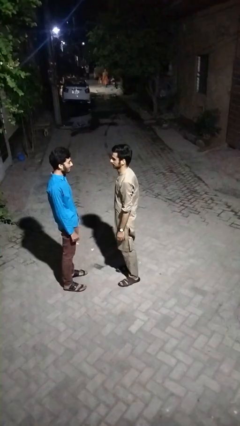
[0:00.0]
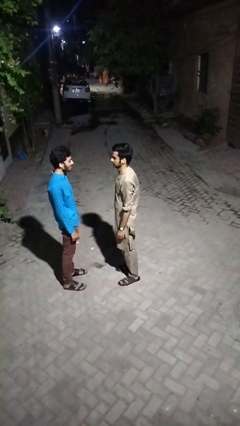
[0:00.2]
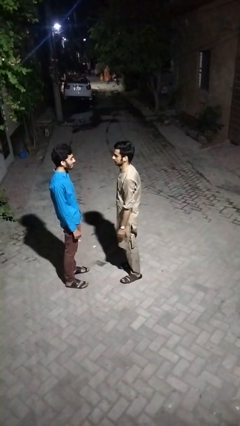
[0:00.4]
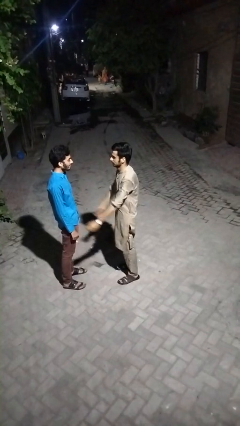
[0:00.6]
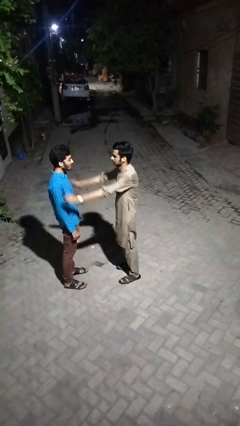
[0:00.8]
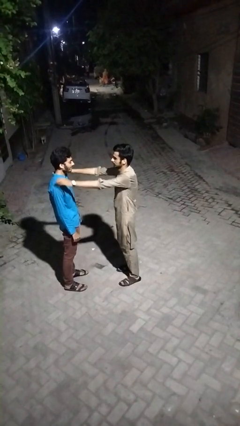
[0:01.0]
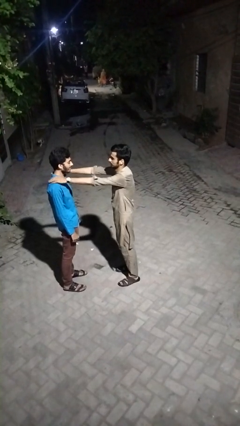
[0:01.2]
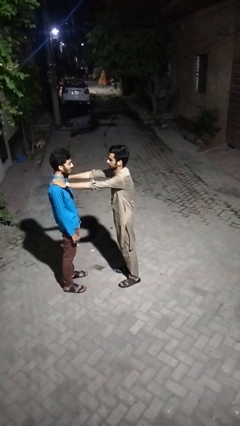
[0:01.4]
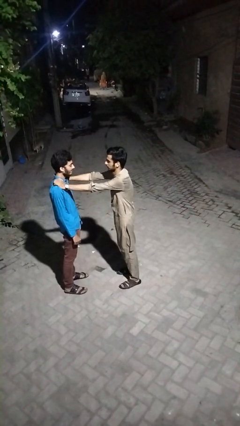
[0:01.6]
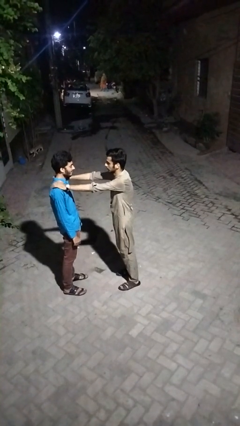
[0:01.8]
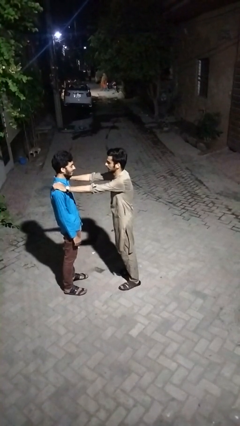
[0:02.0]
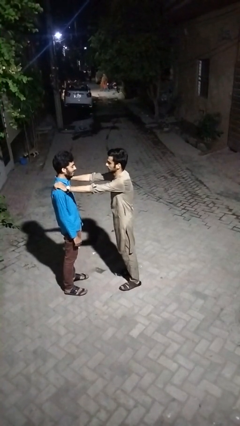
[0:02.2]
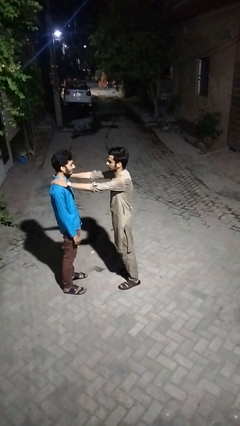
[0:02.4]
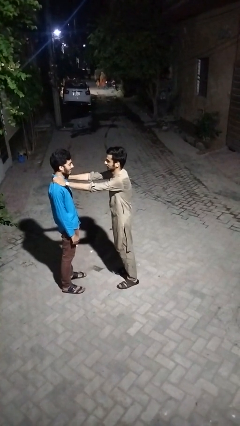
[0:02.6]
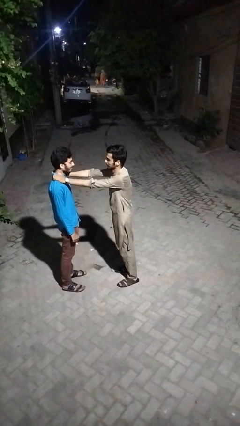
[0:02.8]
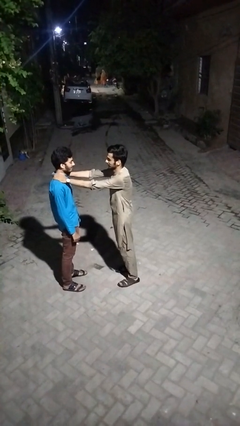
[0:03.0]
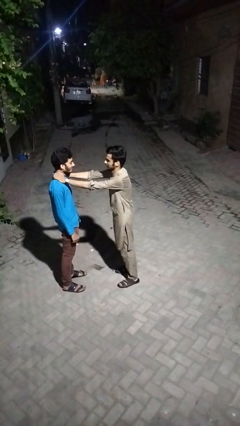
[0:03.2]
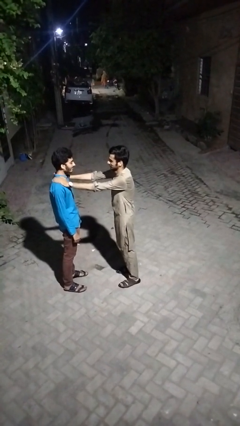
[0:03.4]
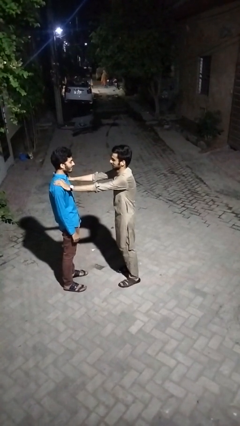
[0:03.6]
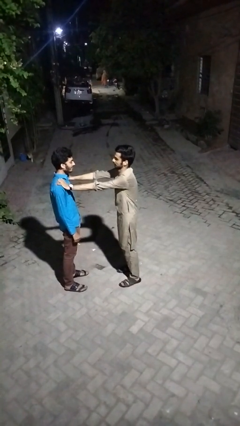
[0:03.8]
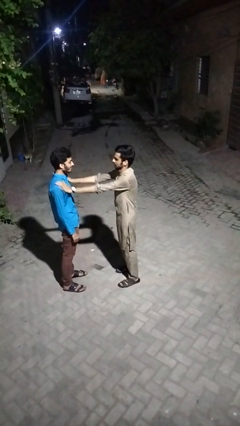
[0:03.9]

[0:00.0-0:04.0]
person pounds shoulders of person

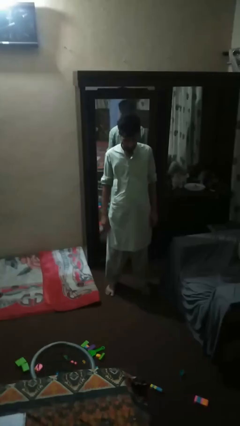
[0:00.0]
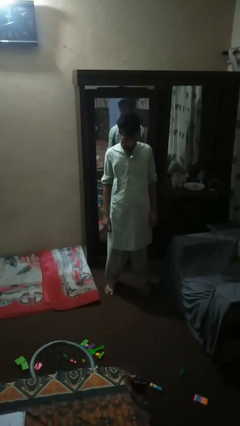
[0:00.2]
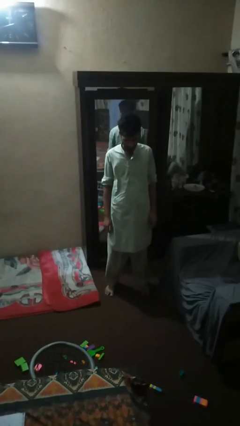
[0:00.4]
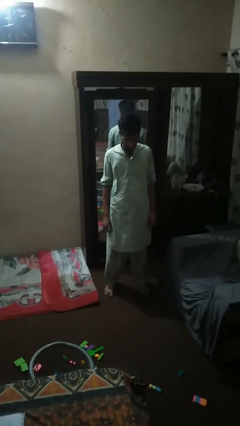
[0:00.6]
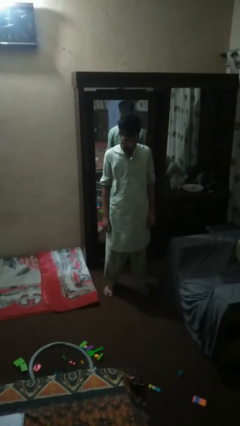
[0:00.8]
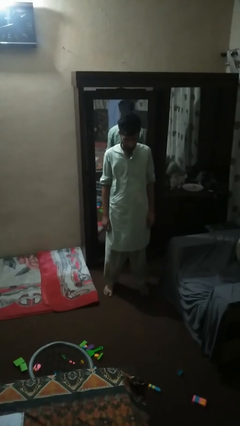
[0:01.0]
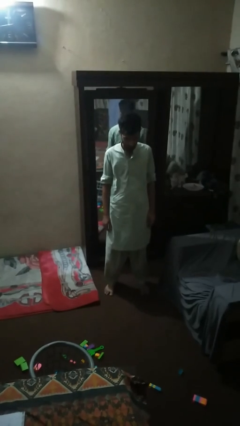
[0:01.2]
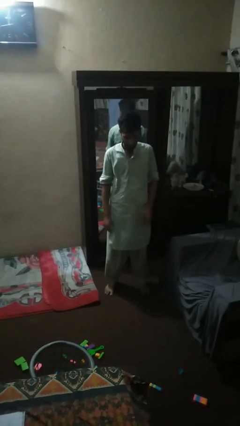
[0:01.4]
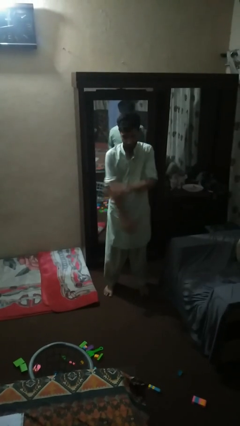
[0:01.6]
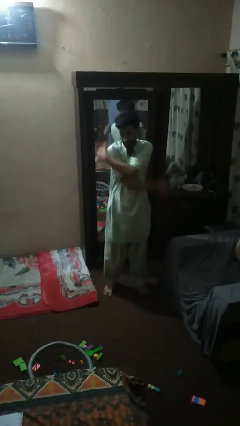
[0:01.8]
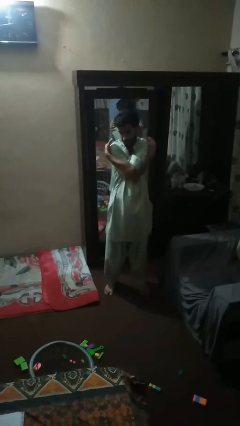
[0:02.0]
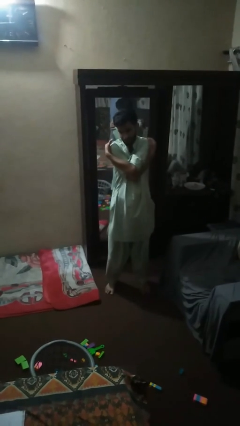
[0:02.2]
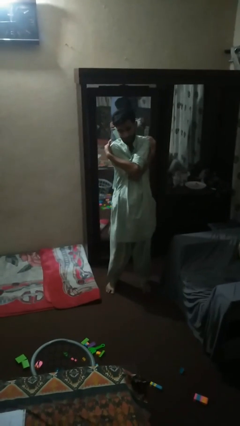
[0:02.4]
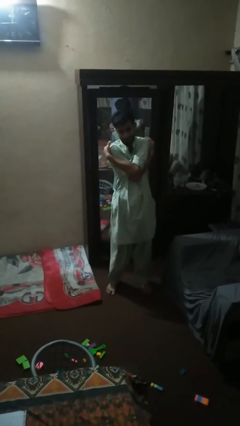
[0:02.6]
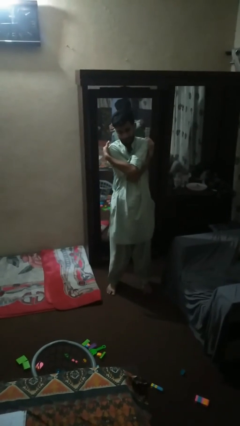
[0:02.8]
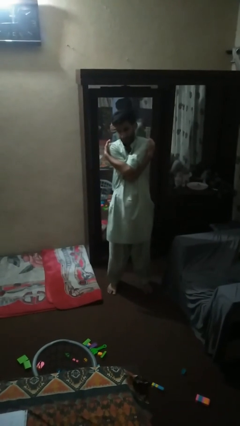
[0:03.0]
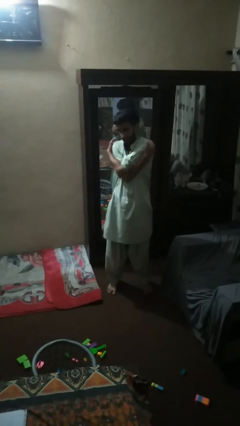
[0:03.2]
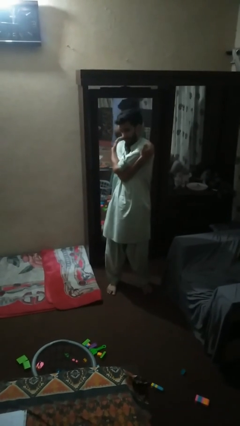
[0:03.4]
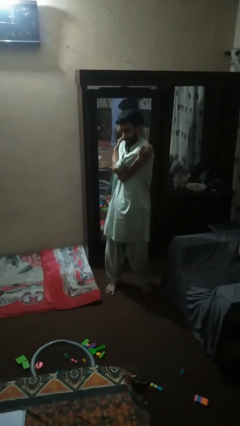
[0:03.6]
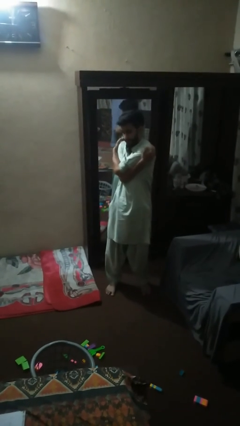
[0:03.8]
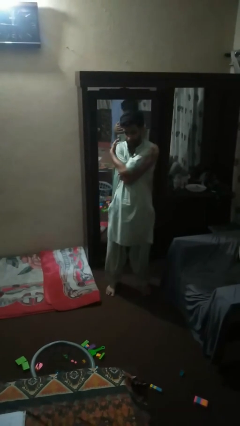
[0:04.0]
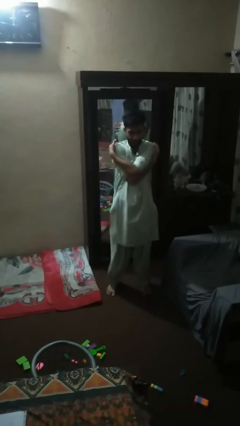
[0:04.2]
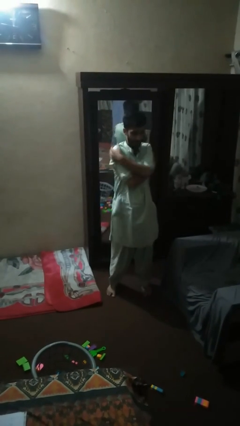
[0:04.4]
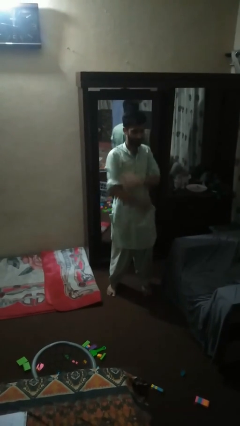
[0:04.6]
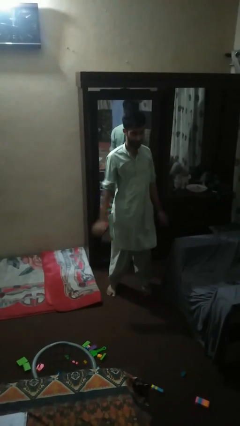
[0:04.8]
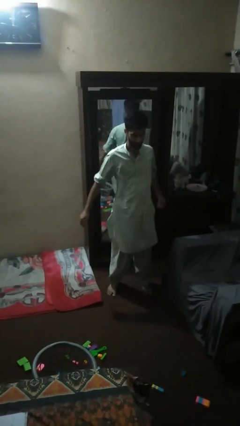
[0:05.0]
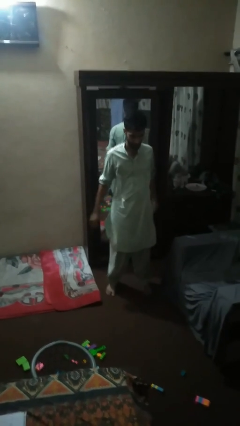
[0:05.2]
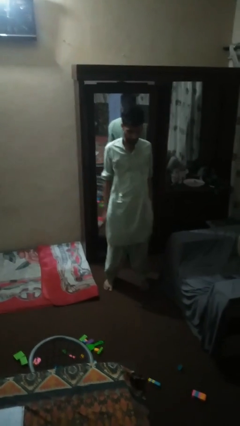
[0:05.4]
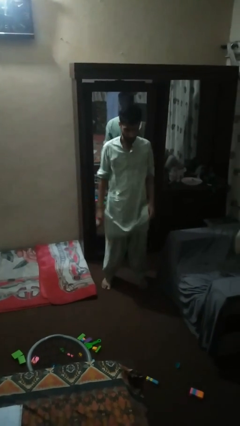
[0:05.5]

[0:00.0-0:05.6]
person stretches arms to side

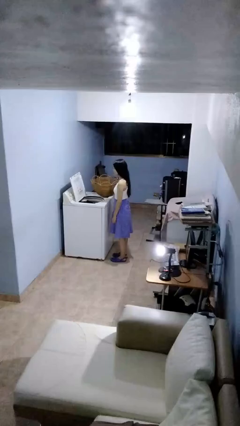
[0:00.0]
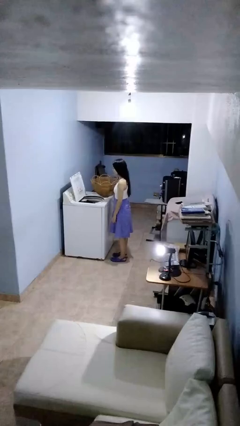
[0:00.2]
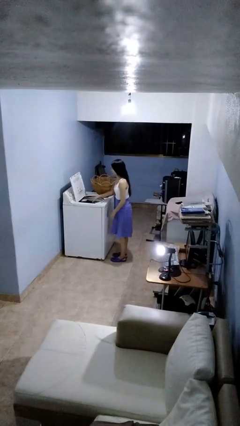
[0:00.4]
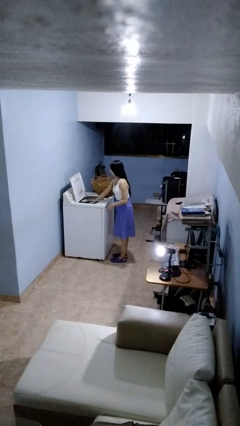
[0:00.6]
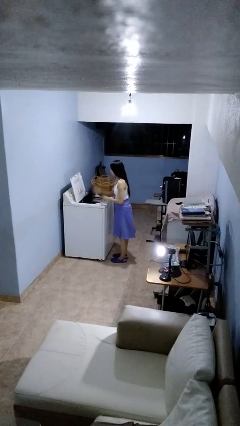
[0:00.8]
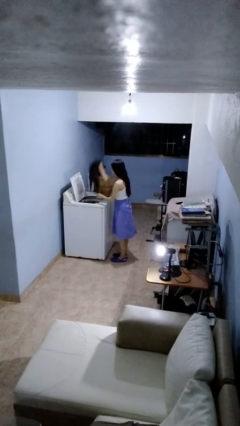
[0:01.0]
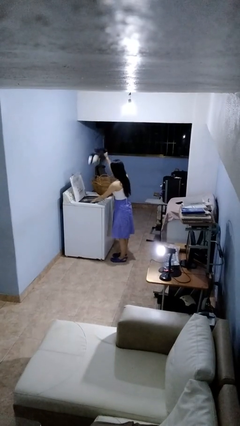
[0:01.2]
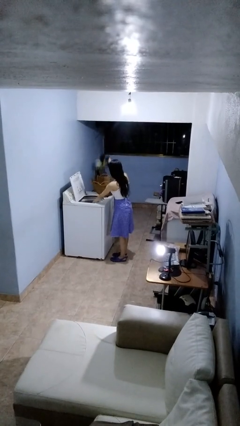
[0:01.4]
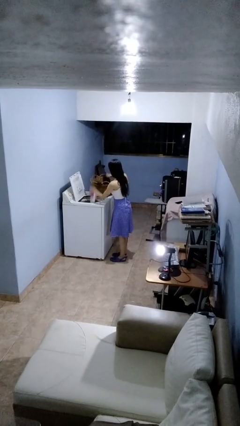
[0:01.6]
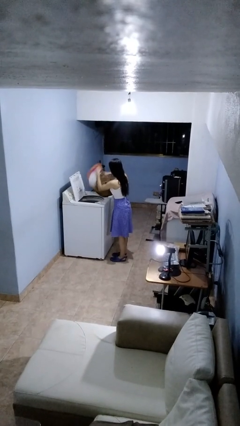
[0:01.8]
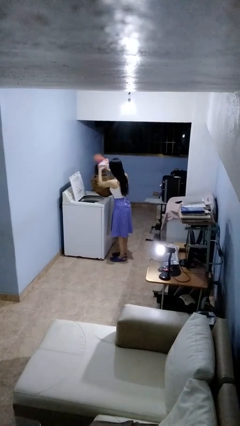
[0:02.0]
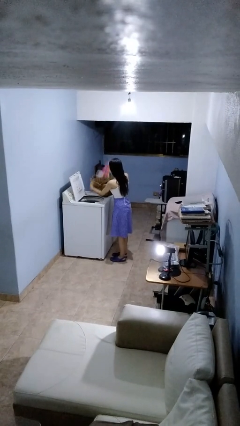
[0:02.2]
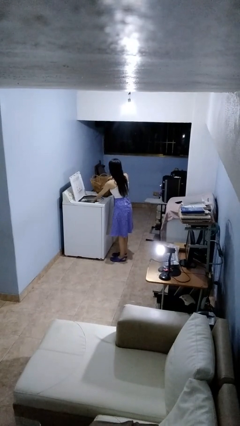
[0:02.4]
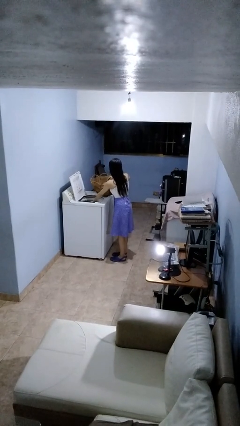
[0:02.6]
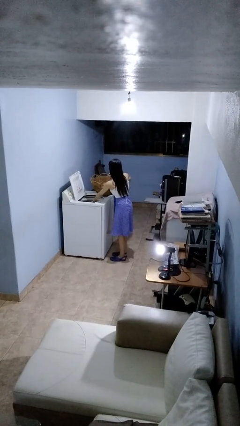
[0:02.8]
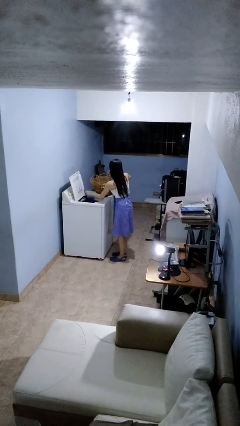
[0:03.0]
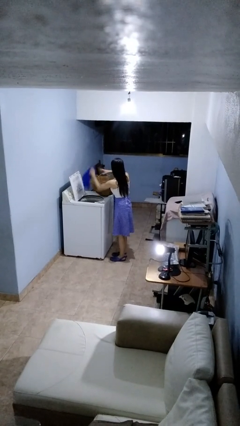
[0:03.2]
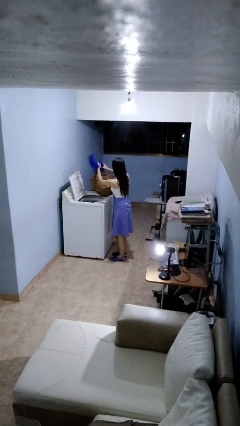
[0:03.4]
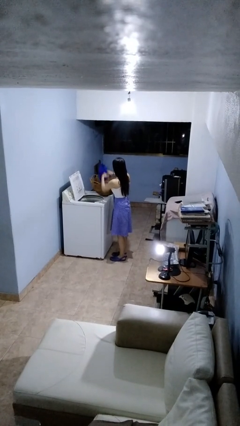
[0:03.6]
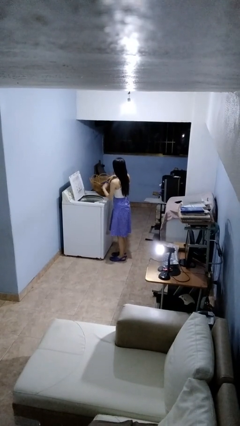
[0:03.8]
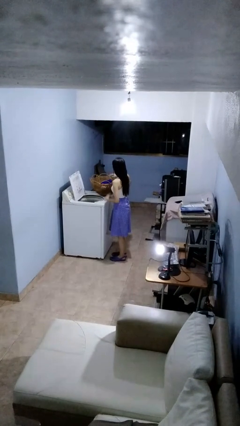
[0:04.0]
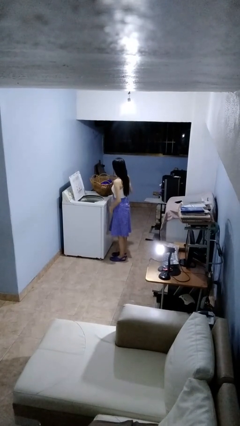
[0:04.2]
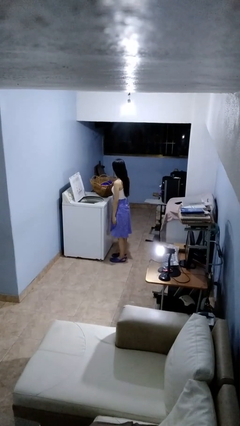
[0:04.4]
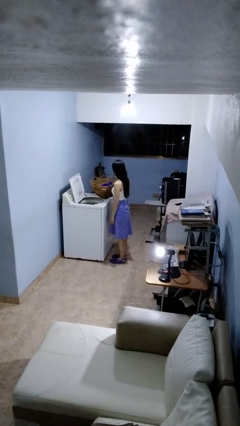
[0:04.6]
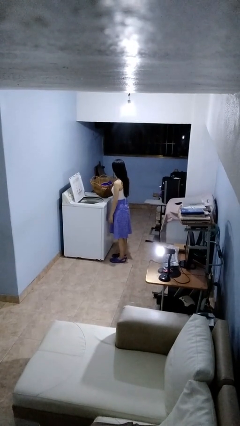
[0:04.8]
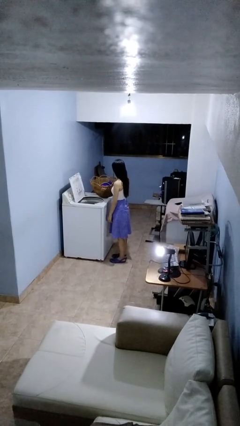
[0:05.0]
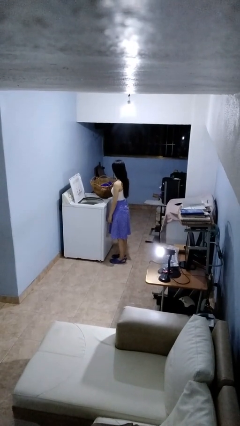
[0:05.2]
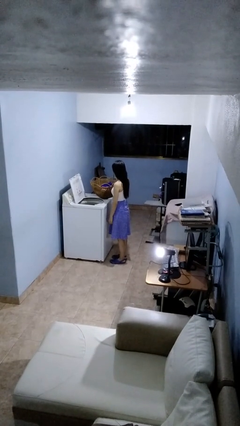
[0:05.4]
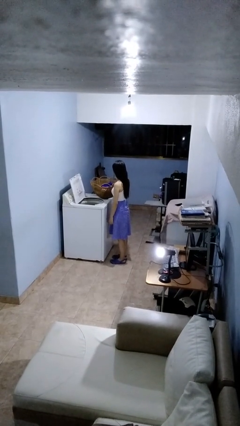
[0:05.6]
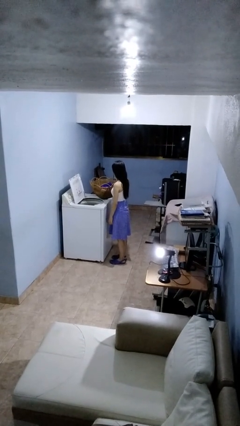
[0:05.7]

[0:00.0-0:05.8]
person unloads clotheswasher

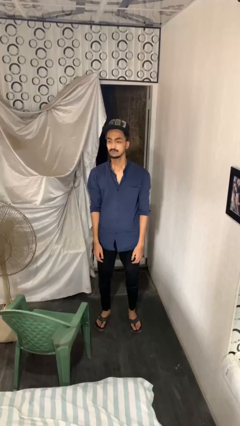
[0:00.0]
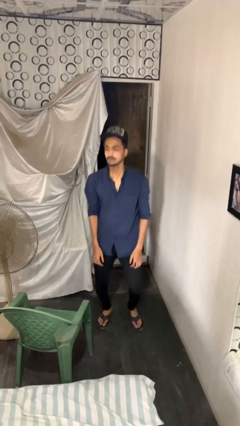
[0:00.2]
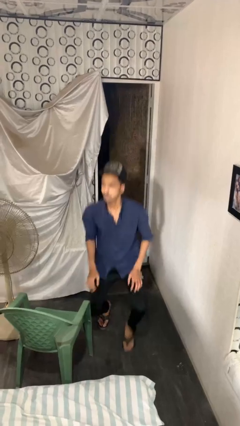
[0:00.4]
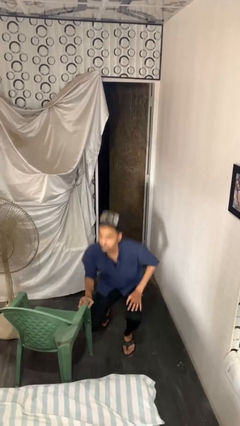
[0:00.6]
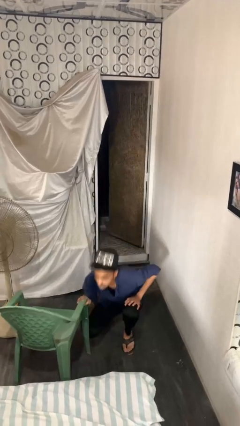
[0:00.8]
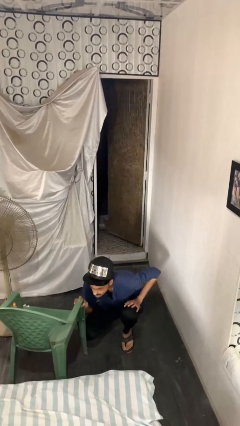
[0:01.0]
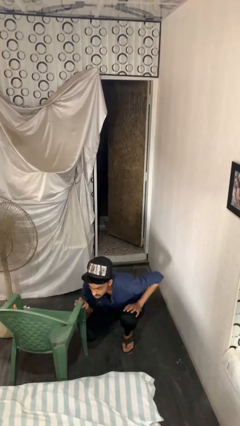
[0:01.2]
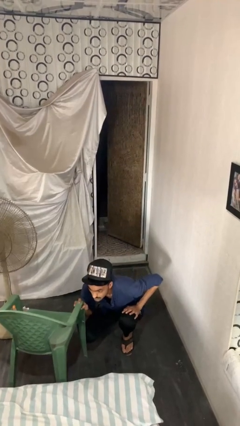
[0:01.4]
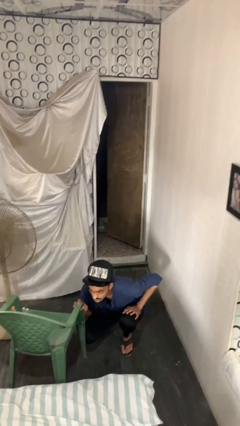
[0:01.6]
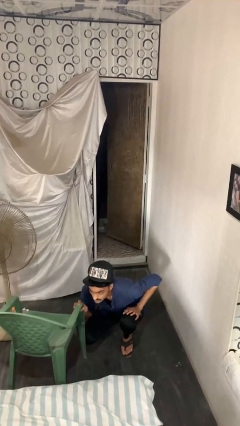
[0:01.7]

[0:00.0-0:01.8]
person trips on object on floor

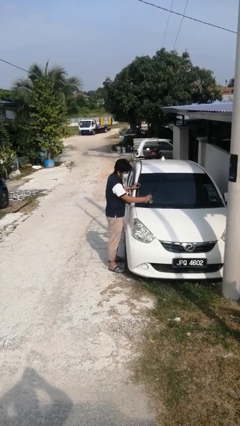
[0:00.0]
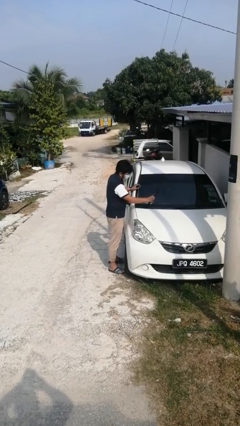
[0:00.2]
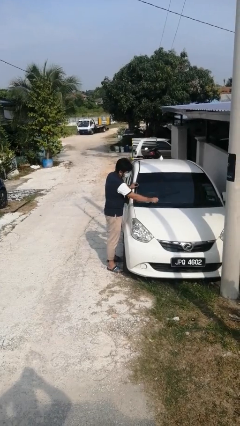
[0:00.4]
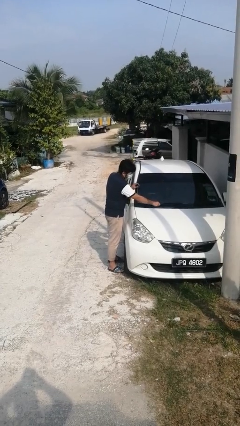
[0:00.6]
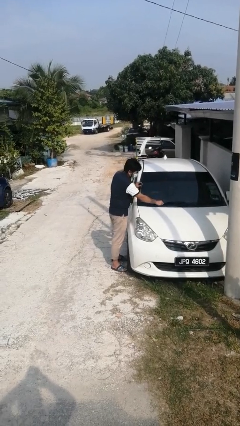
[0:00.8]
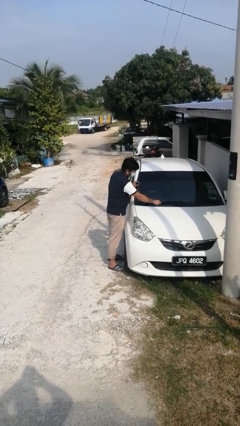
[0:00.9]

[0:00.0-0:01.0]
person flips down car wipers
